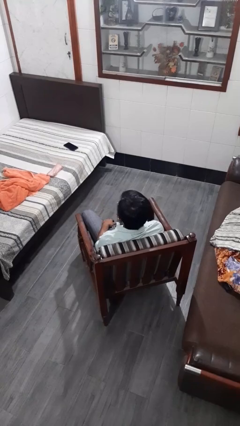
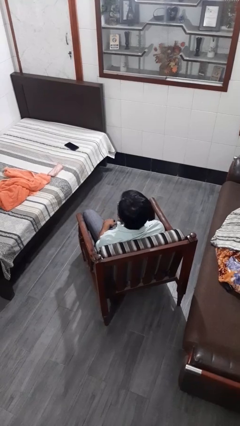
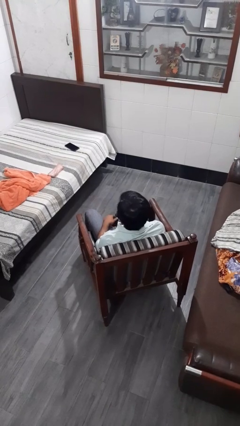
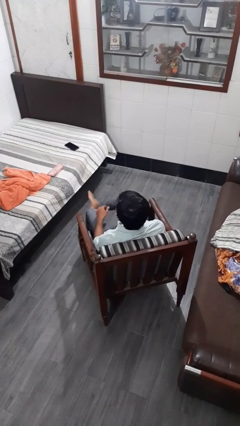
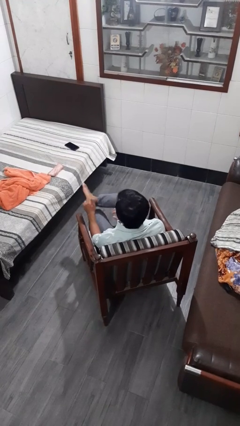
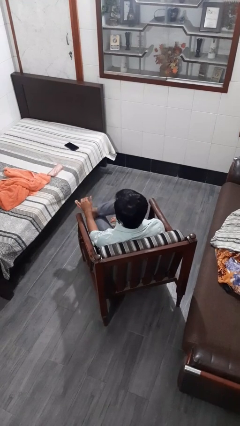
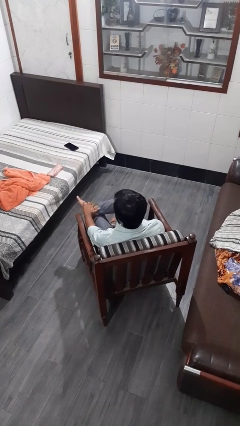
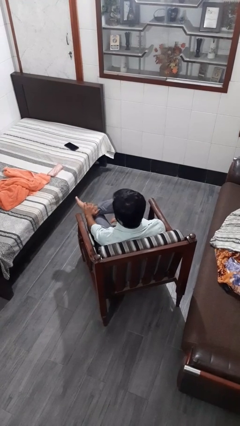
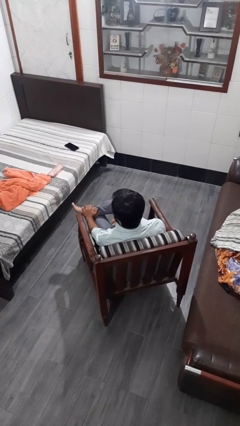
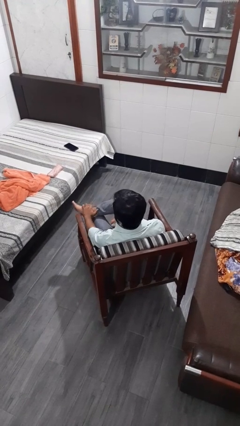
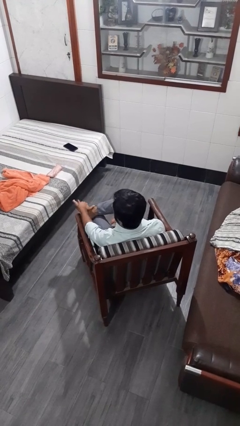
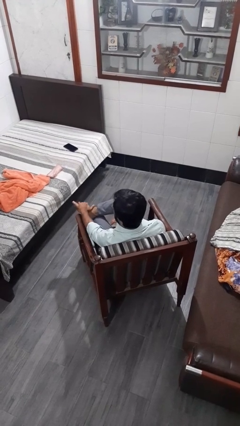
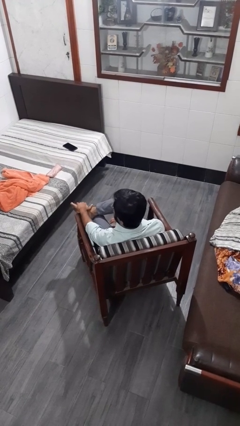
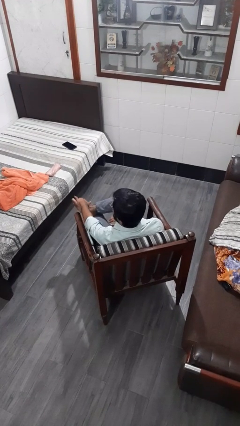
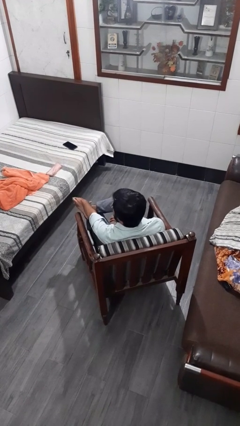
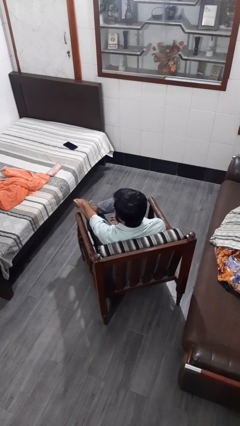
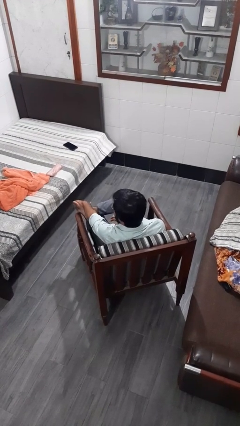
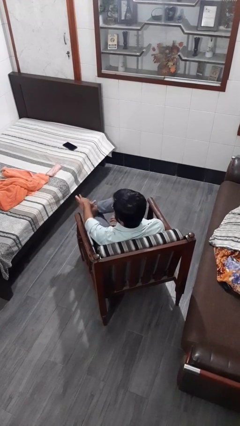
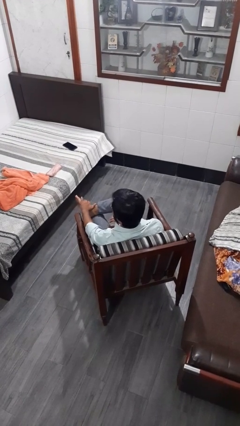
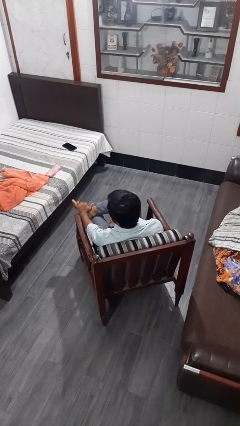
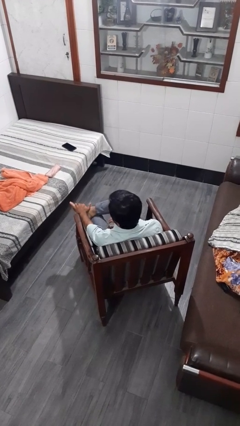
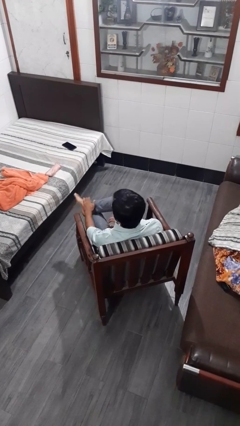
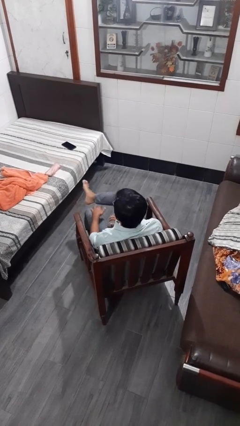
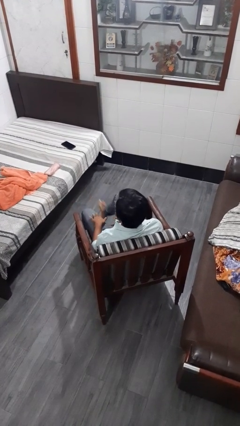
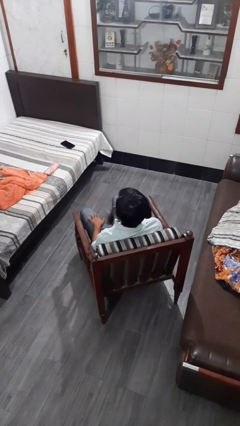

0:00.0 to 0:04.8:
person rubs foot

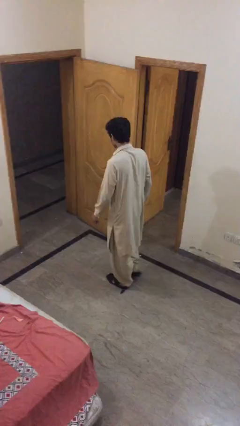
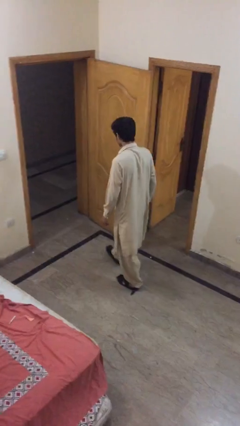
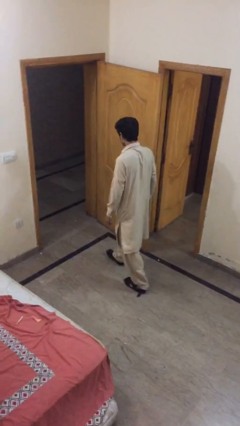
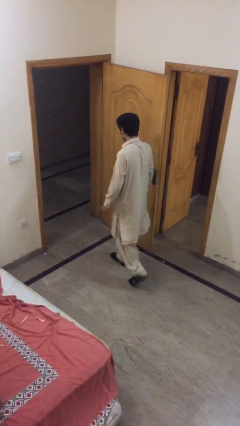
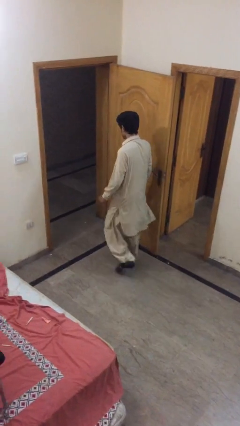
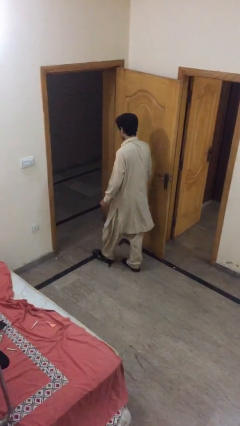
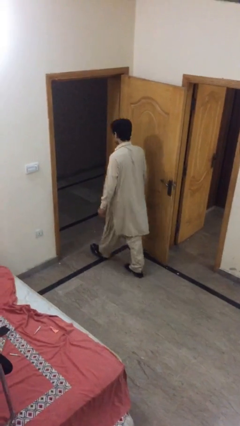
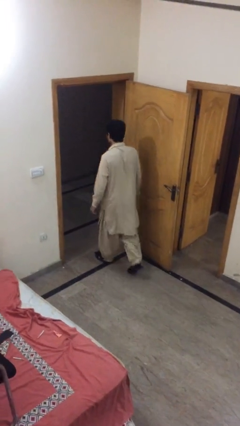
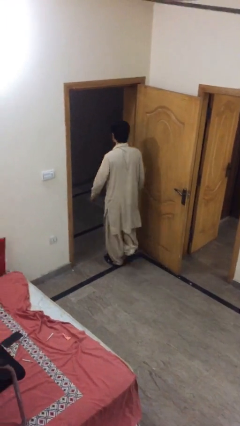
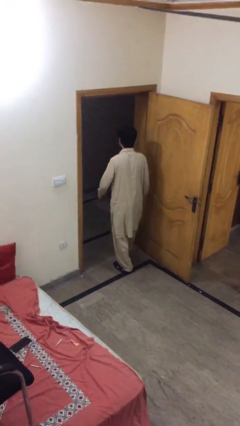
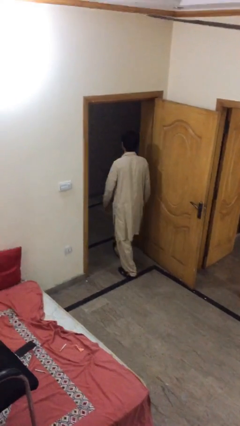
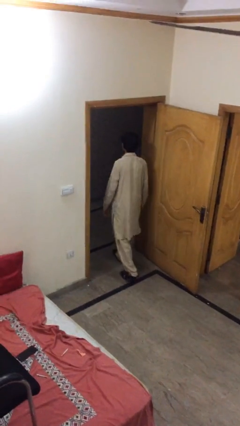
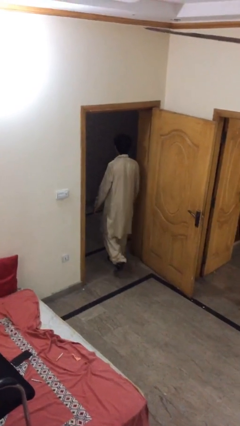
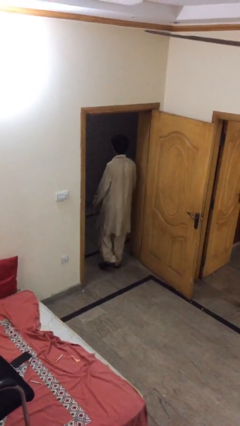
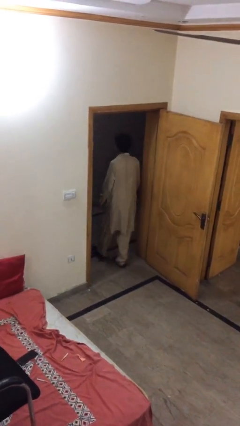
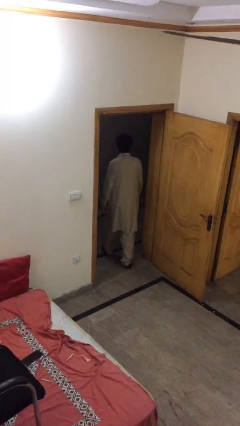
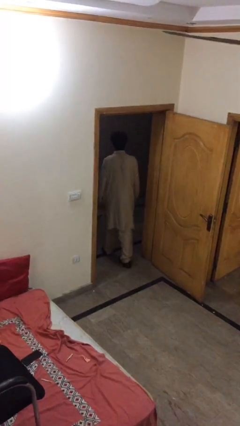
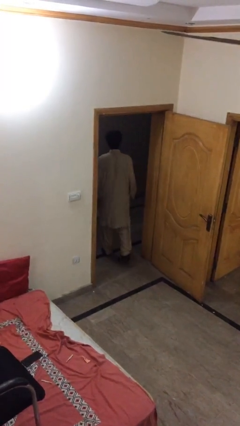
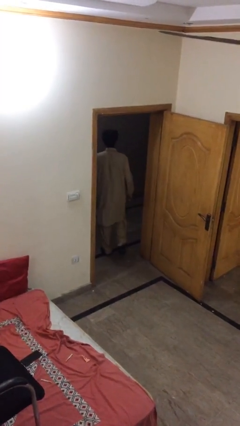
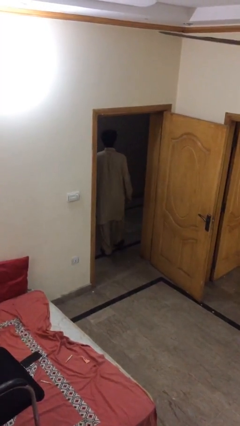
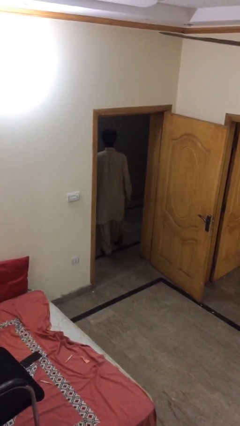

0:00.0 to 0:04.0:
person exits scene through structure

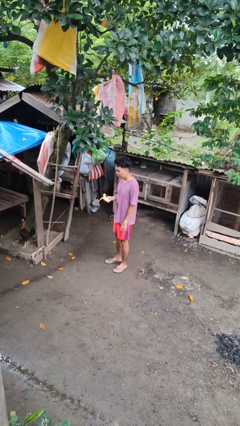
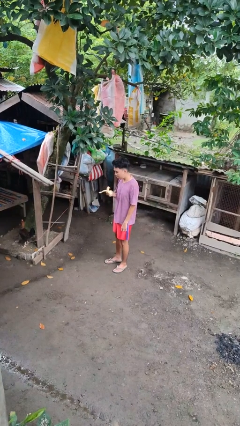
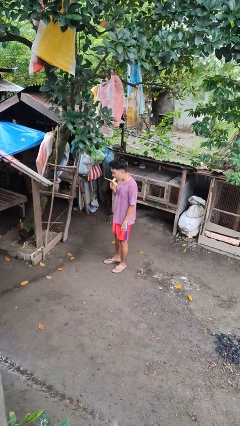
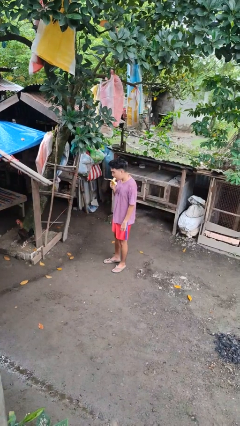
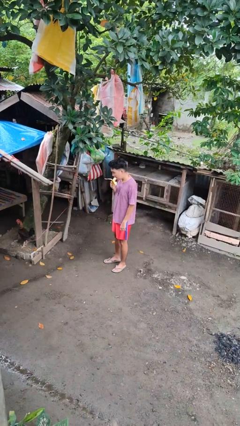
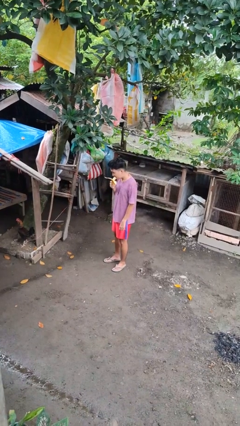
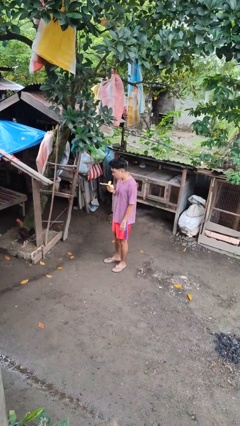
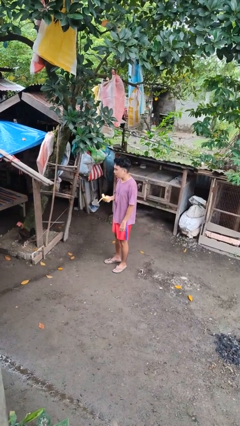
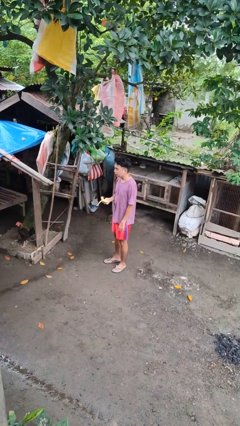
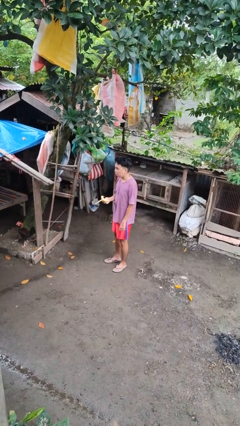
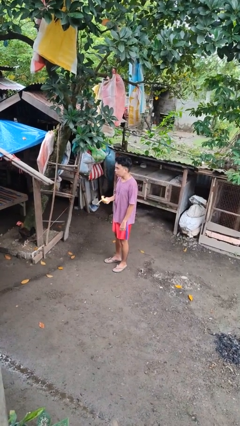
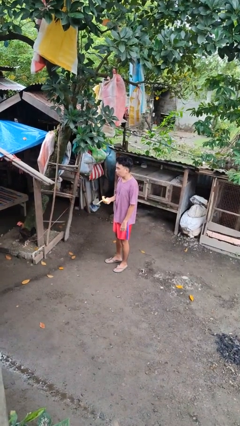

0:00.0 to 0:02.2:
person eats banana

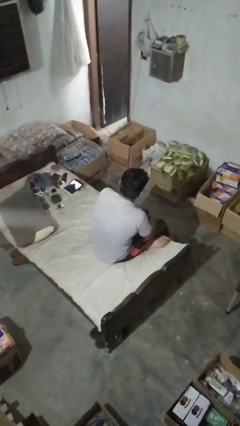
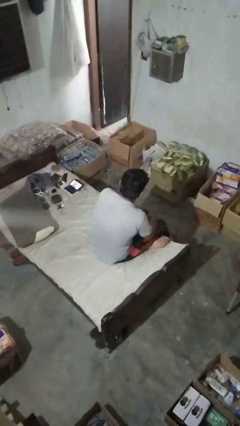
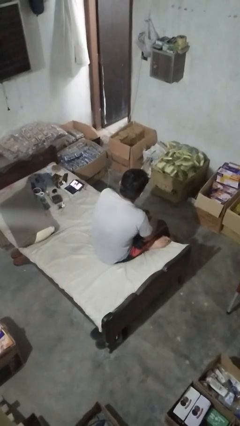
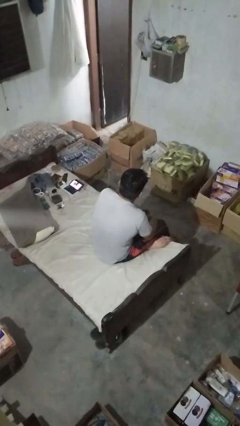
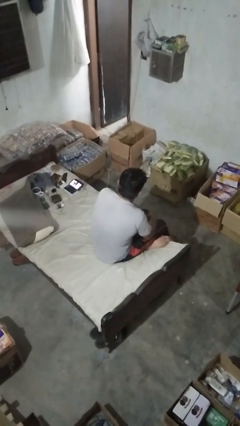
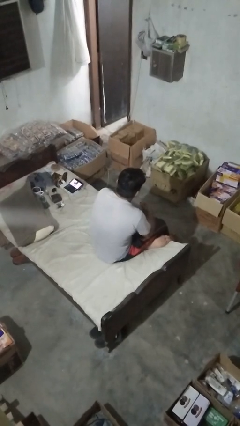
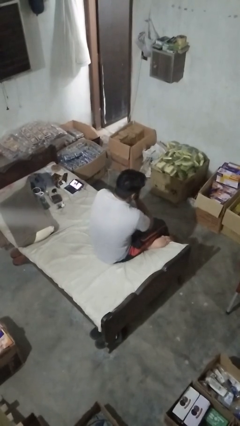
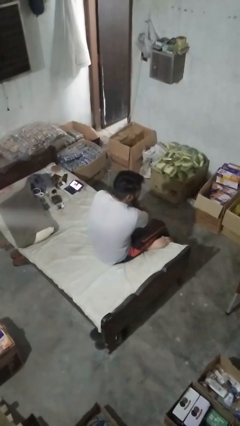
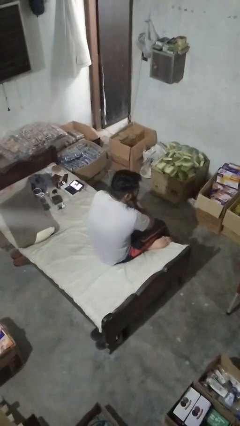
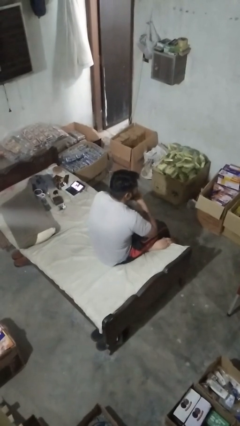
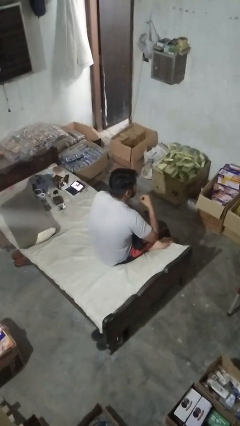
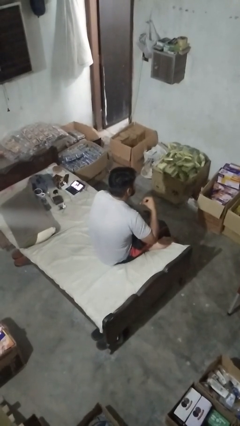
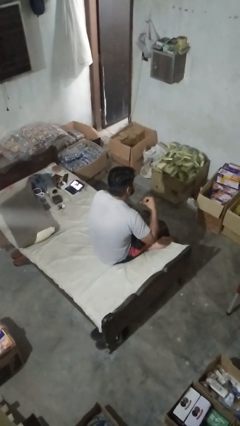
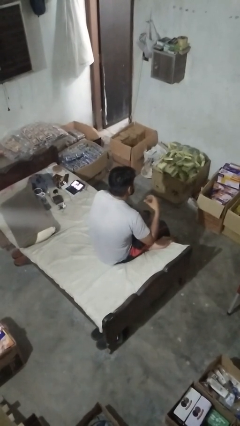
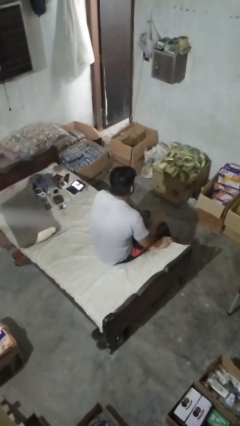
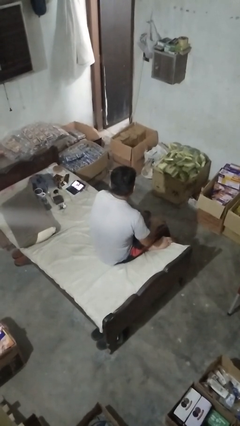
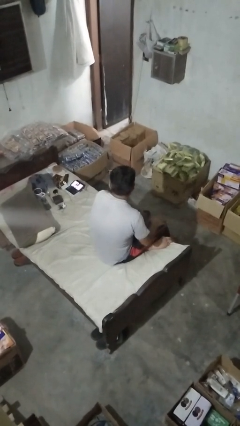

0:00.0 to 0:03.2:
person gestures cut

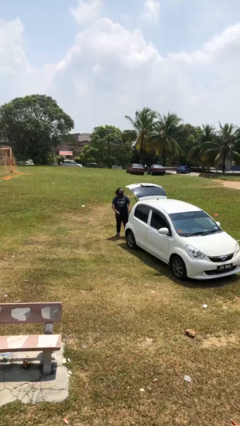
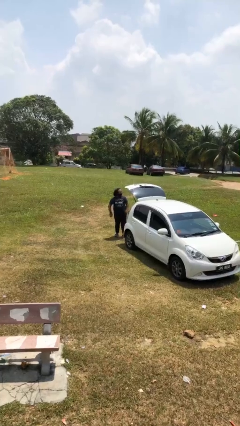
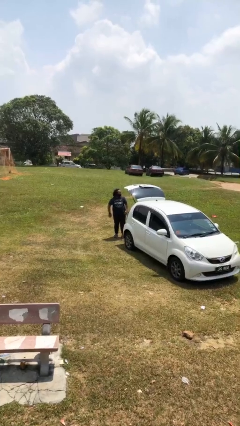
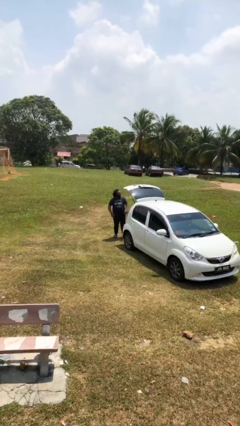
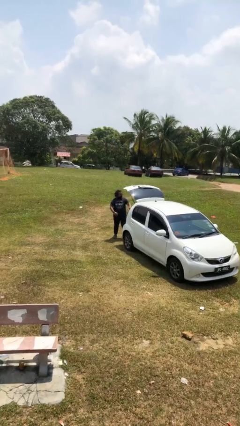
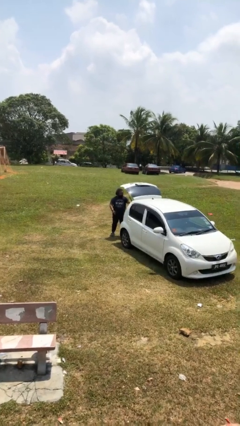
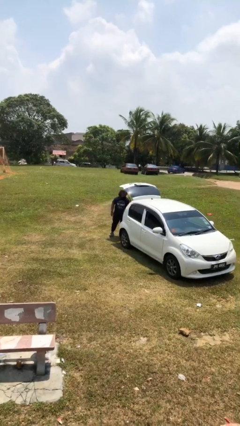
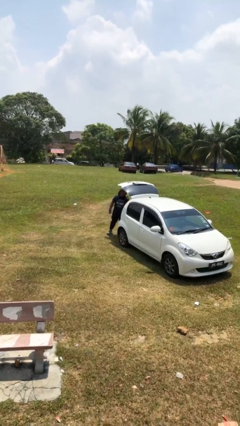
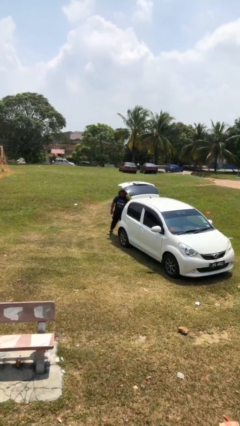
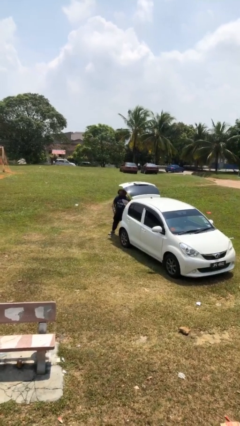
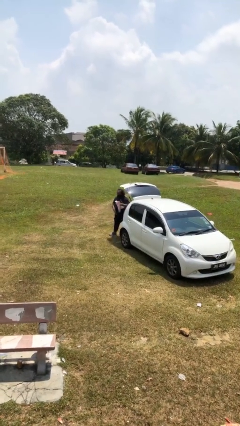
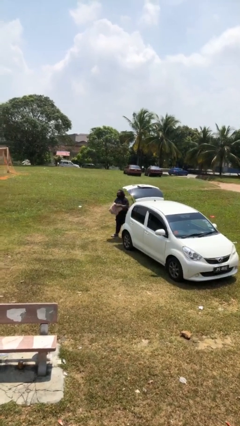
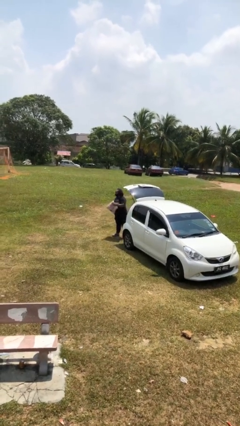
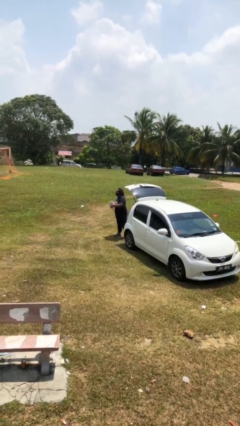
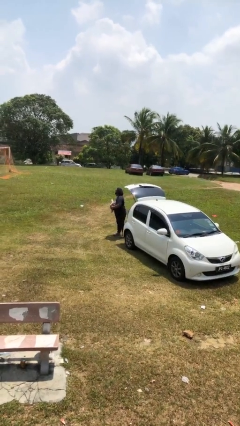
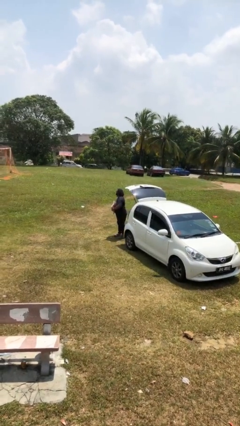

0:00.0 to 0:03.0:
person unloads car
